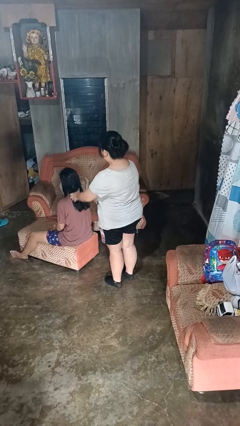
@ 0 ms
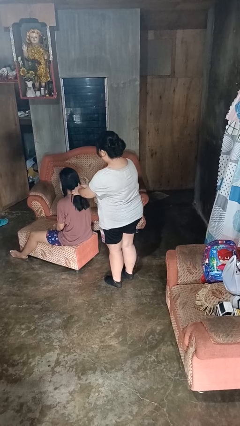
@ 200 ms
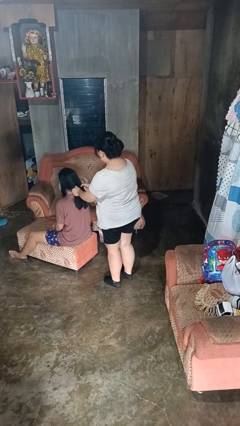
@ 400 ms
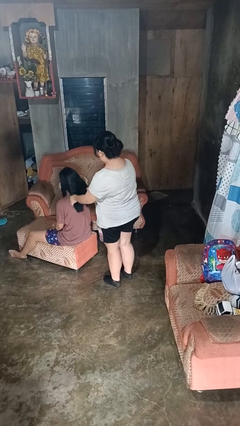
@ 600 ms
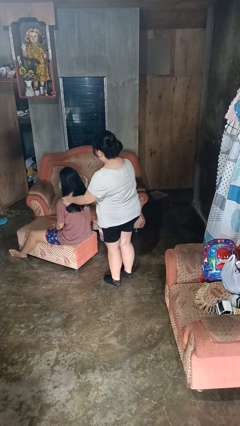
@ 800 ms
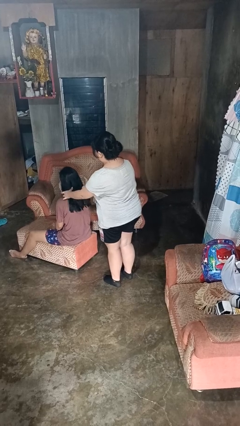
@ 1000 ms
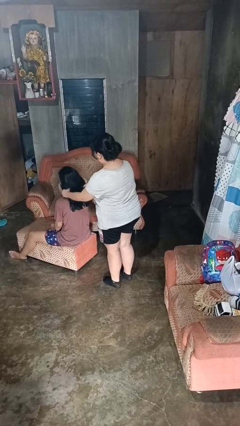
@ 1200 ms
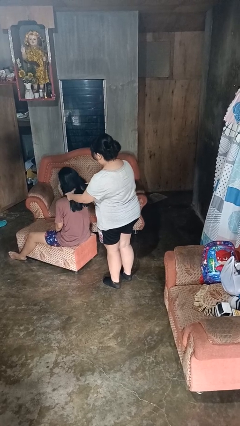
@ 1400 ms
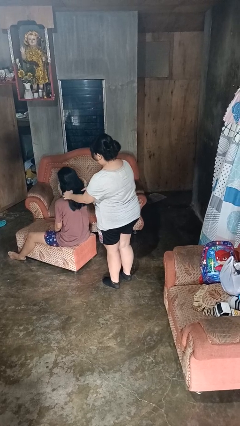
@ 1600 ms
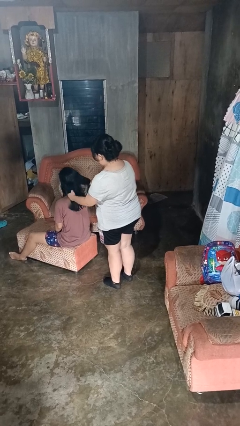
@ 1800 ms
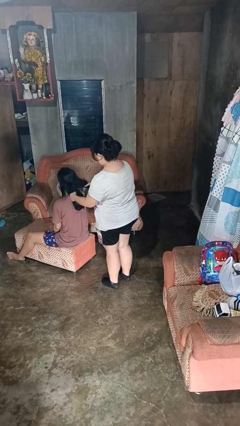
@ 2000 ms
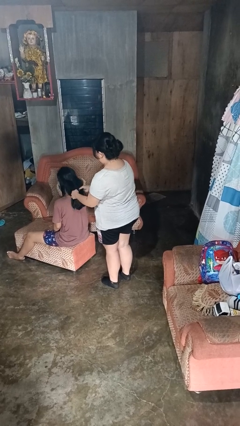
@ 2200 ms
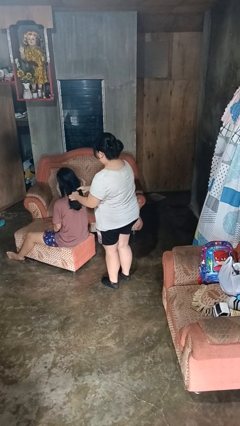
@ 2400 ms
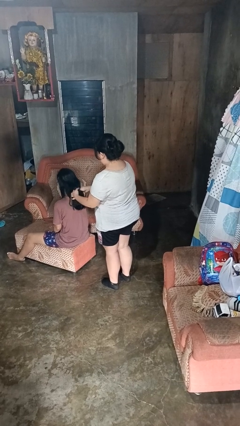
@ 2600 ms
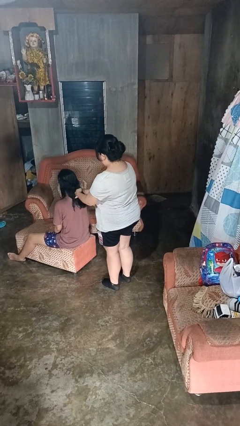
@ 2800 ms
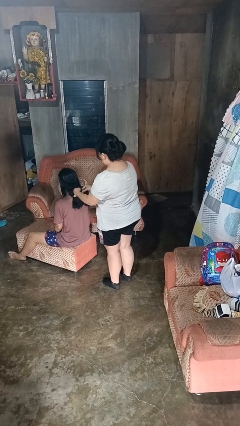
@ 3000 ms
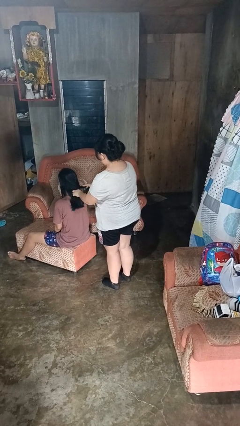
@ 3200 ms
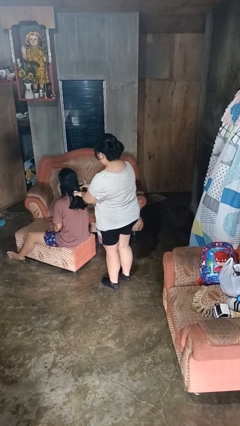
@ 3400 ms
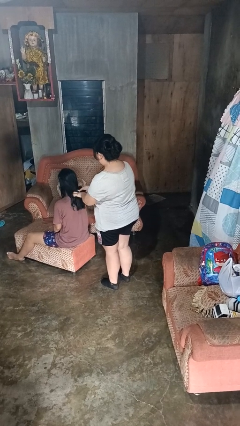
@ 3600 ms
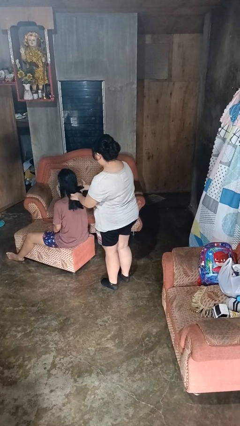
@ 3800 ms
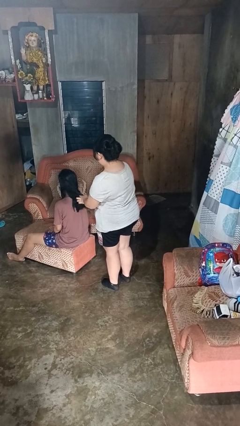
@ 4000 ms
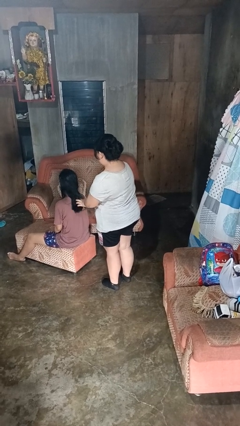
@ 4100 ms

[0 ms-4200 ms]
person braids hair of person

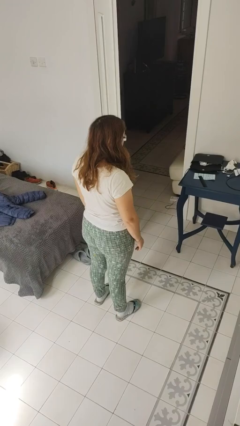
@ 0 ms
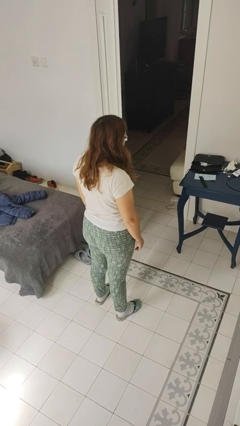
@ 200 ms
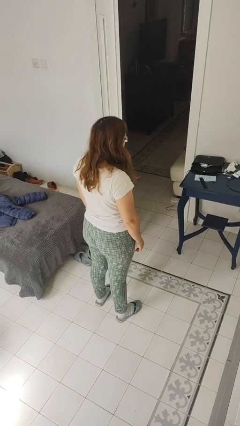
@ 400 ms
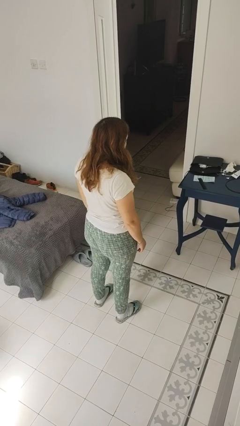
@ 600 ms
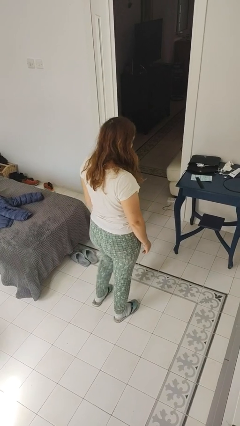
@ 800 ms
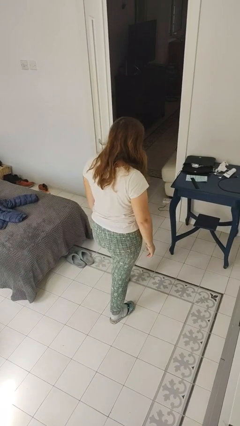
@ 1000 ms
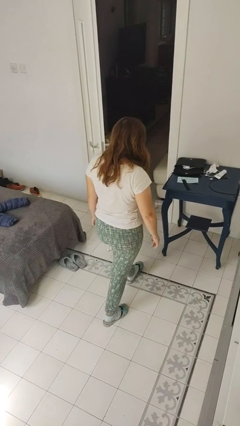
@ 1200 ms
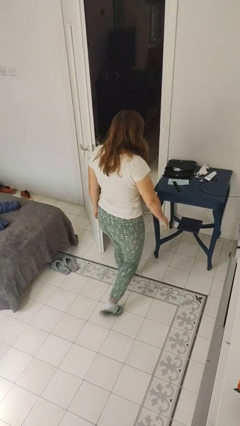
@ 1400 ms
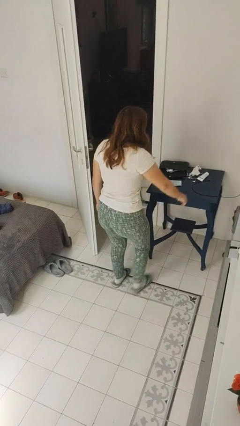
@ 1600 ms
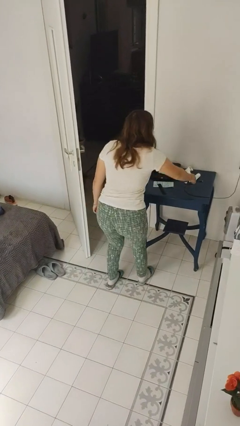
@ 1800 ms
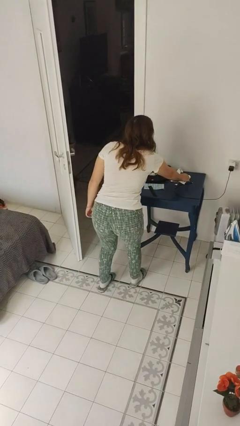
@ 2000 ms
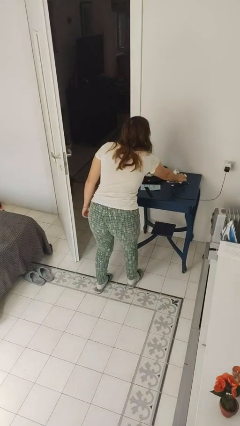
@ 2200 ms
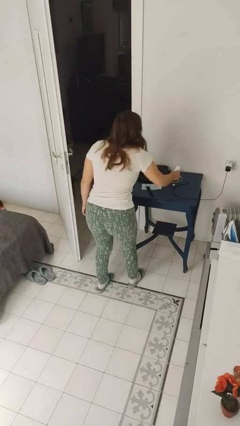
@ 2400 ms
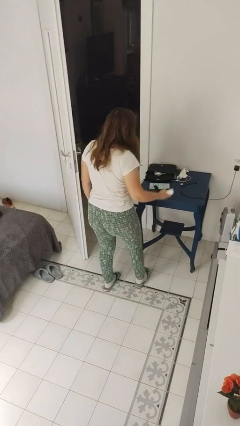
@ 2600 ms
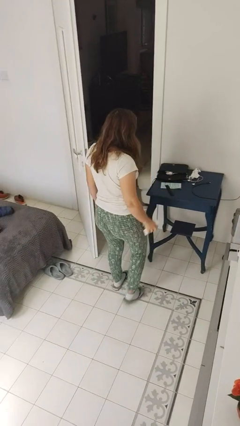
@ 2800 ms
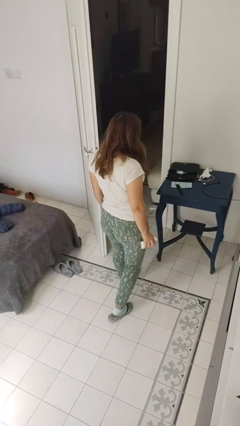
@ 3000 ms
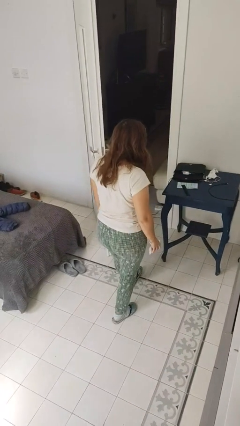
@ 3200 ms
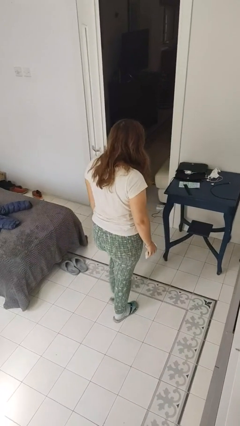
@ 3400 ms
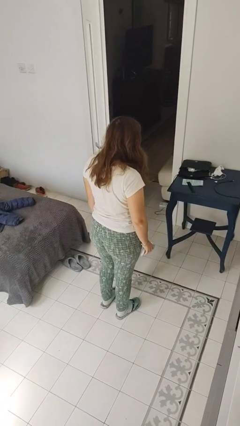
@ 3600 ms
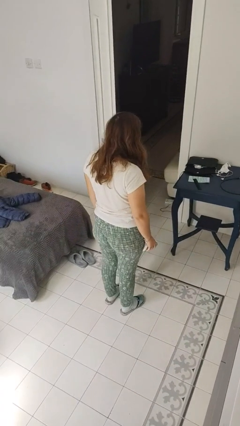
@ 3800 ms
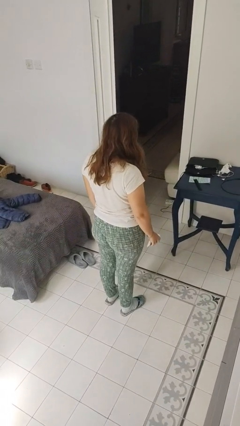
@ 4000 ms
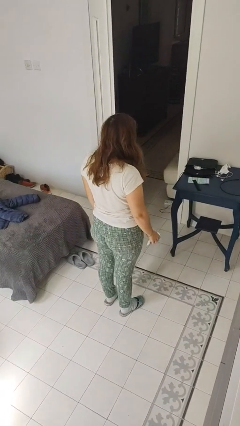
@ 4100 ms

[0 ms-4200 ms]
person picks up object from table

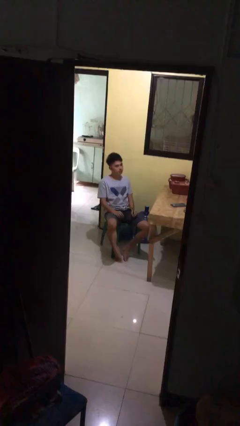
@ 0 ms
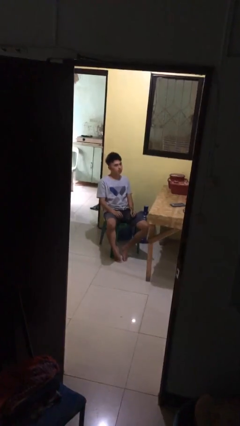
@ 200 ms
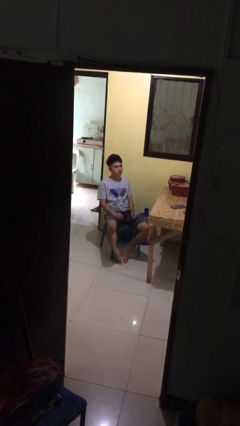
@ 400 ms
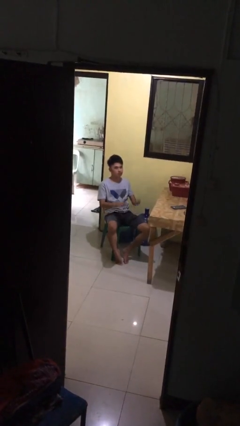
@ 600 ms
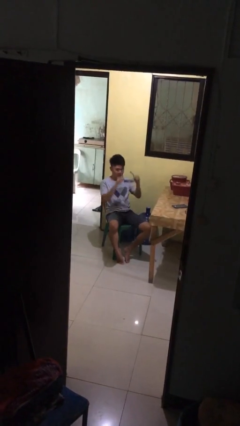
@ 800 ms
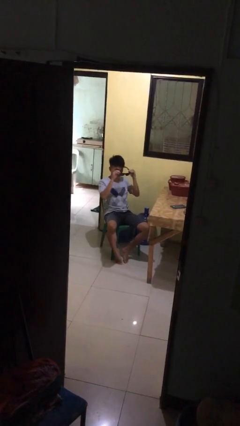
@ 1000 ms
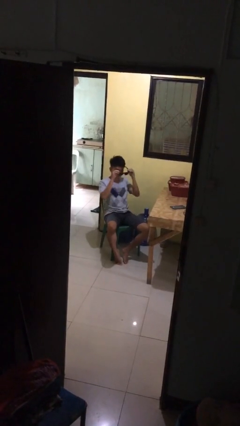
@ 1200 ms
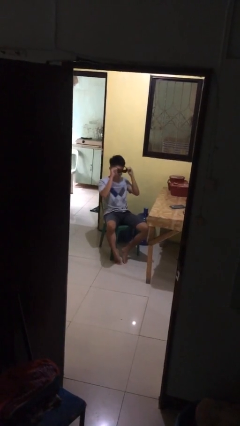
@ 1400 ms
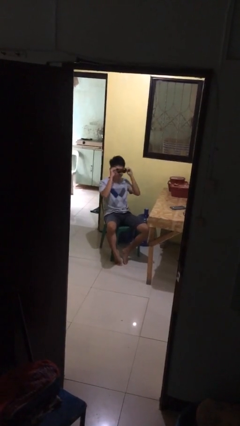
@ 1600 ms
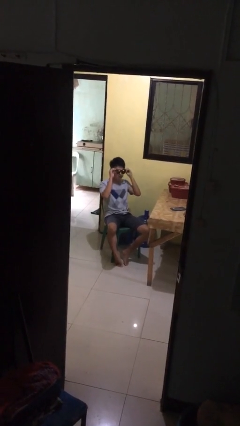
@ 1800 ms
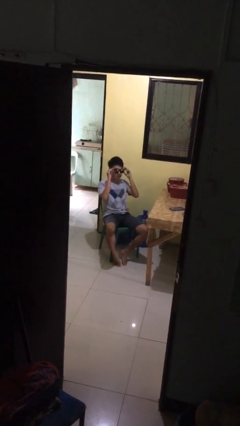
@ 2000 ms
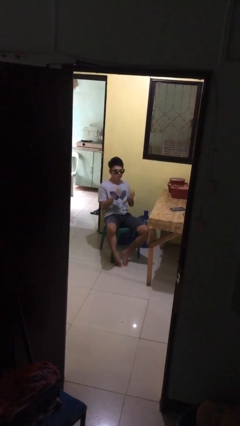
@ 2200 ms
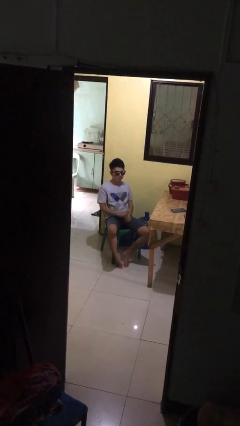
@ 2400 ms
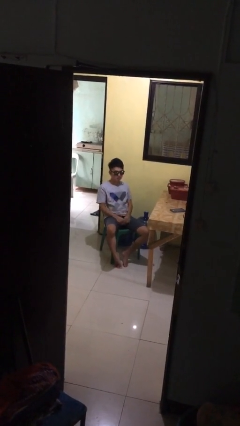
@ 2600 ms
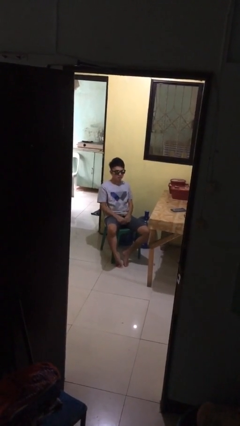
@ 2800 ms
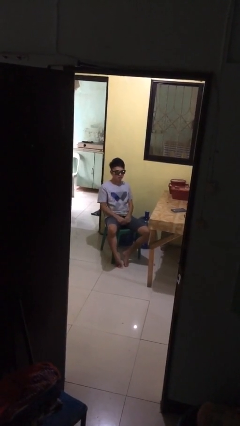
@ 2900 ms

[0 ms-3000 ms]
person puts on sunglasses

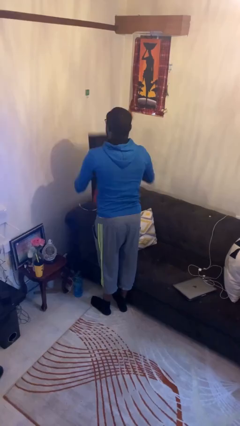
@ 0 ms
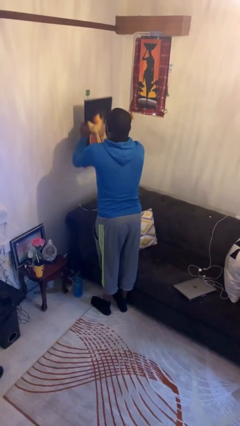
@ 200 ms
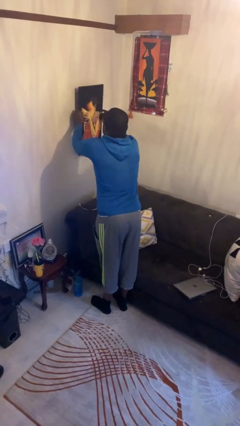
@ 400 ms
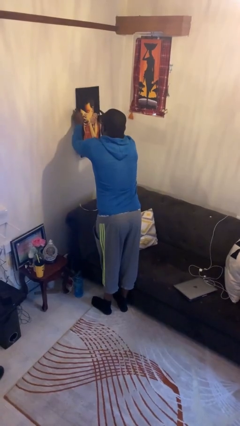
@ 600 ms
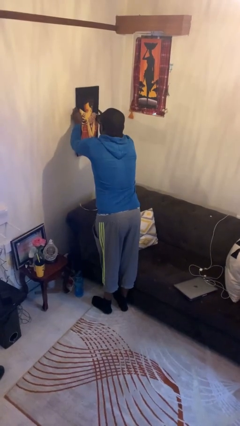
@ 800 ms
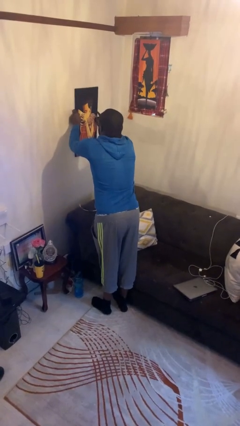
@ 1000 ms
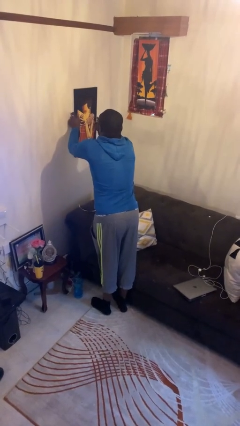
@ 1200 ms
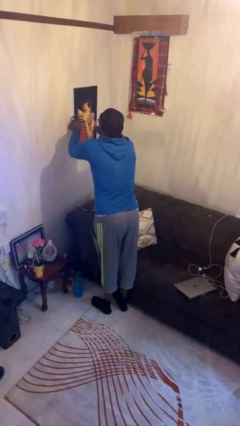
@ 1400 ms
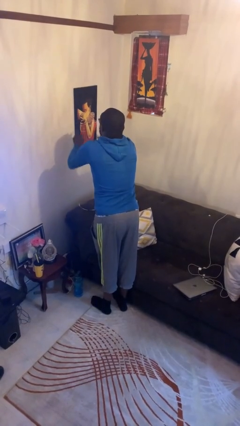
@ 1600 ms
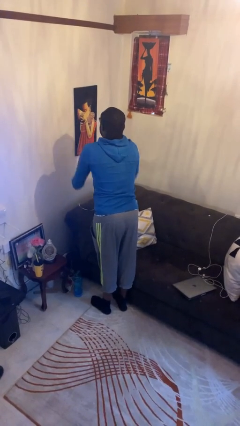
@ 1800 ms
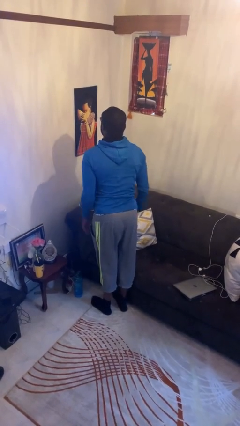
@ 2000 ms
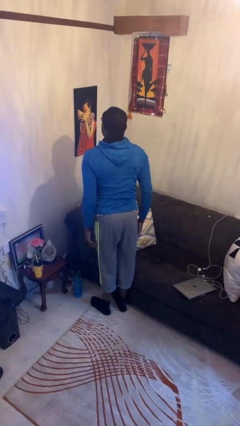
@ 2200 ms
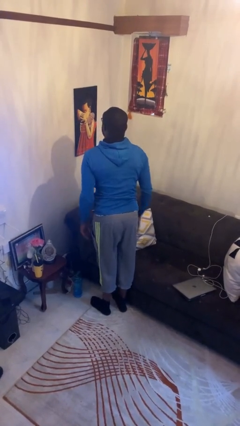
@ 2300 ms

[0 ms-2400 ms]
person puts up picture frame

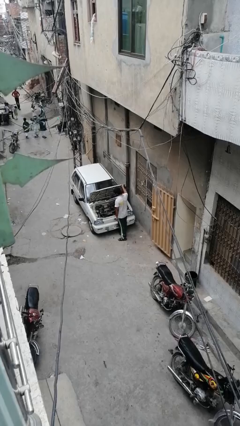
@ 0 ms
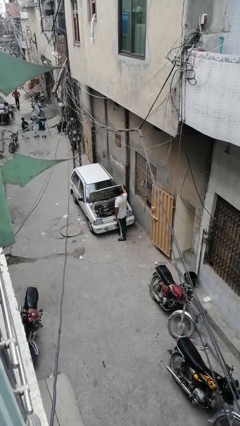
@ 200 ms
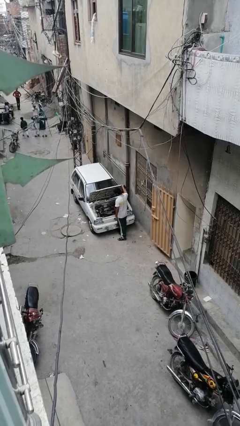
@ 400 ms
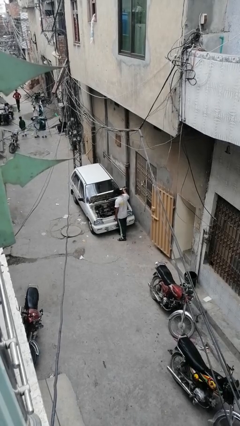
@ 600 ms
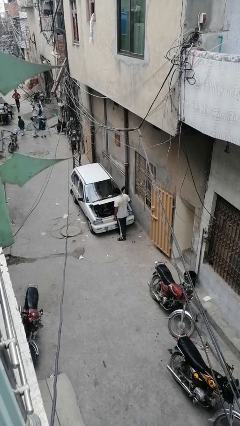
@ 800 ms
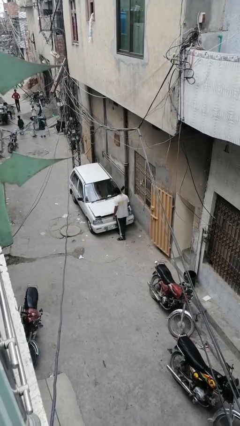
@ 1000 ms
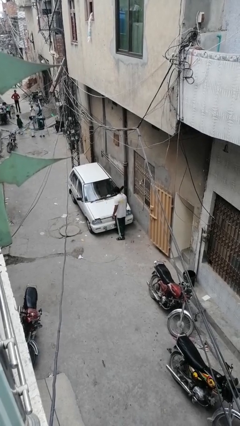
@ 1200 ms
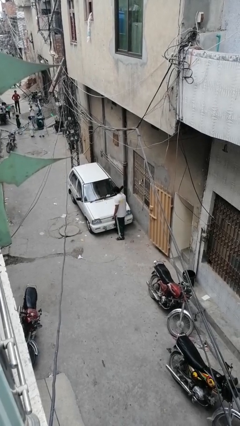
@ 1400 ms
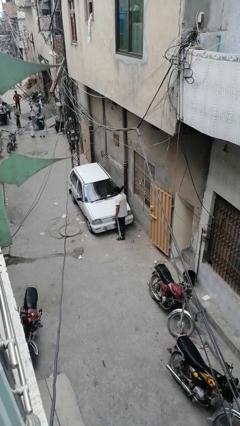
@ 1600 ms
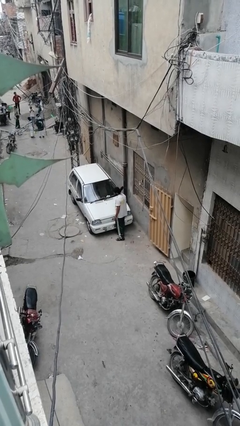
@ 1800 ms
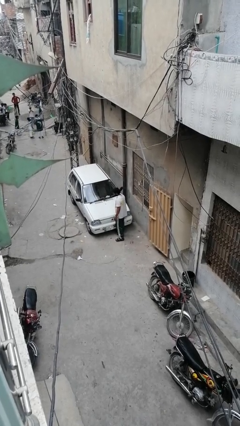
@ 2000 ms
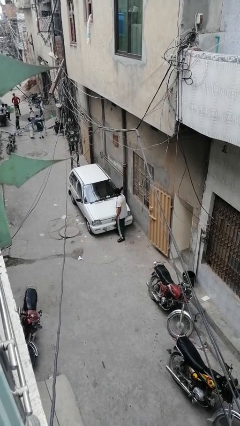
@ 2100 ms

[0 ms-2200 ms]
person closes car hood

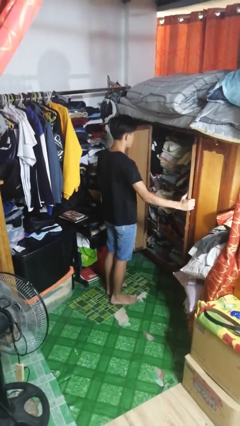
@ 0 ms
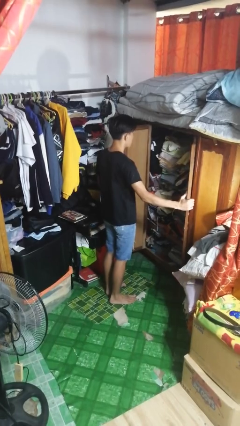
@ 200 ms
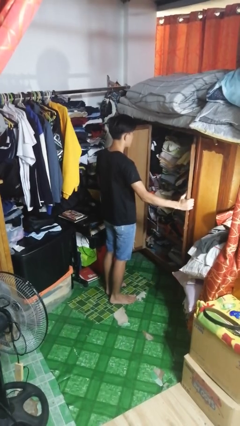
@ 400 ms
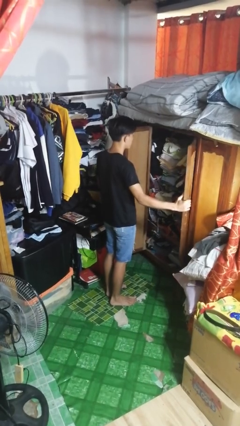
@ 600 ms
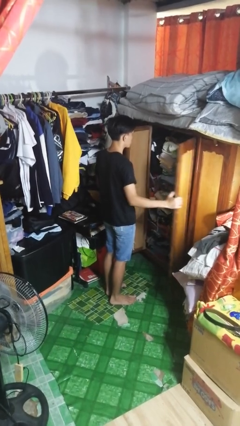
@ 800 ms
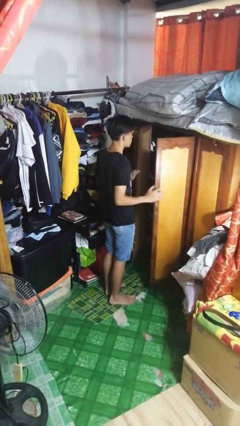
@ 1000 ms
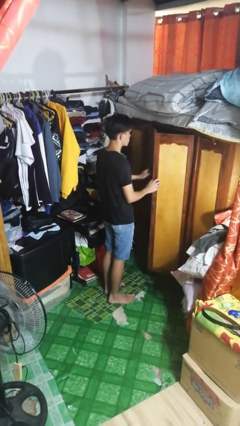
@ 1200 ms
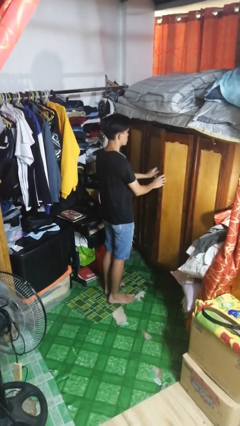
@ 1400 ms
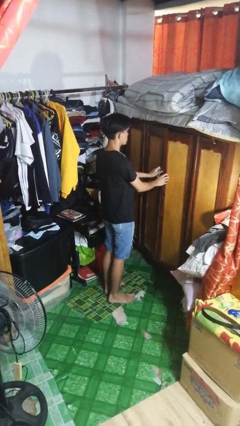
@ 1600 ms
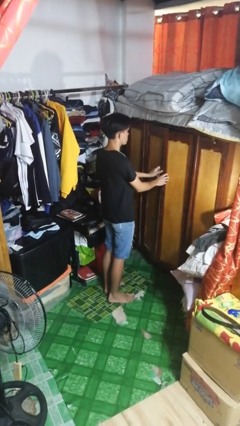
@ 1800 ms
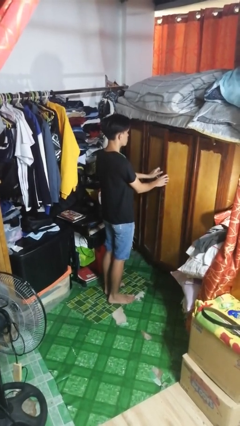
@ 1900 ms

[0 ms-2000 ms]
person closes closet door
